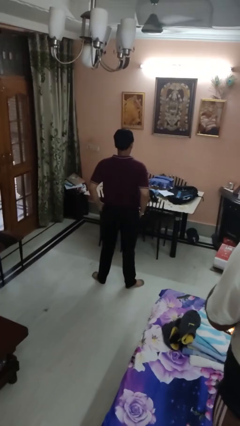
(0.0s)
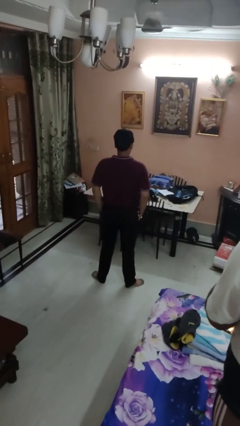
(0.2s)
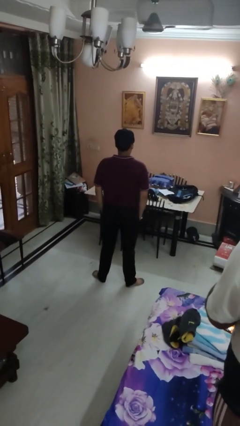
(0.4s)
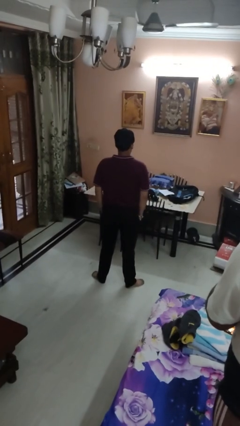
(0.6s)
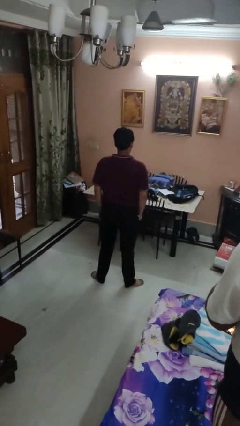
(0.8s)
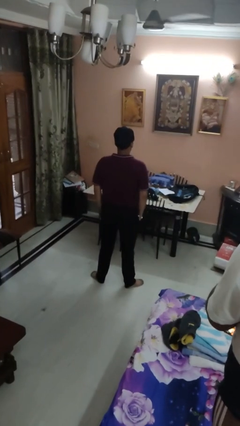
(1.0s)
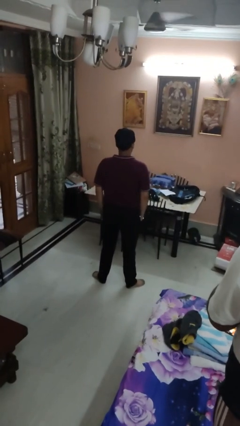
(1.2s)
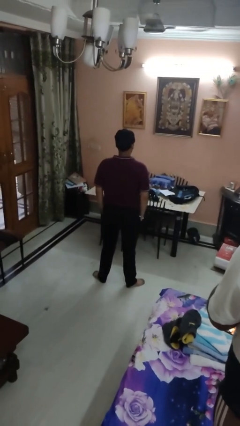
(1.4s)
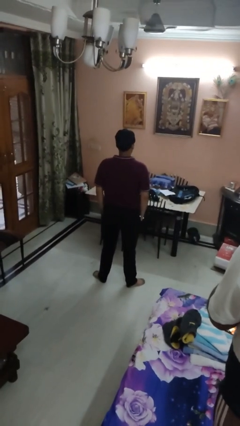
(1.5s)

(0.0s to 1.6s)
person puts hands in back pockets

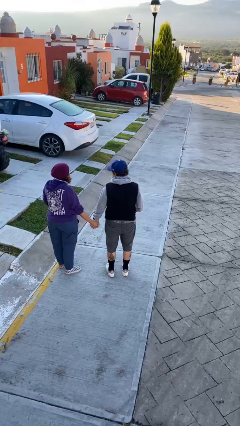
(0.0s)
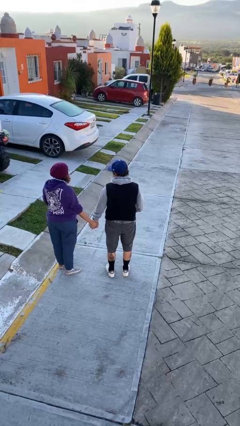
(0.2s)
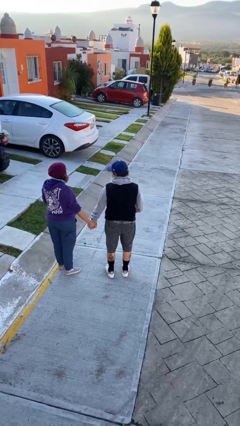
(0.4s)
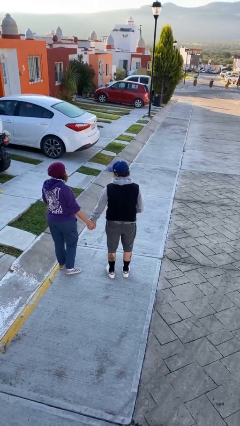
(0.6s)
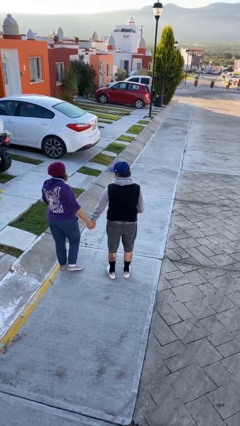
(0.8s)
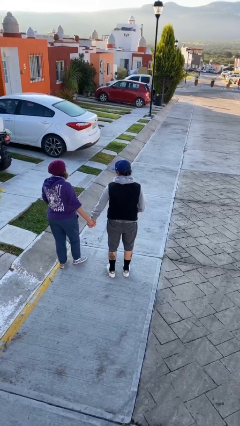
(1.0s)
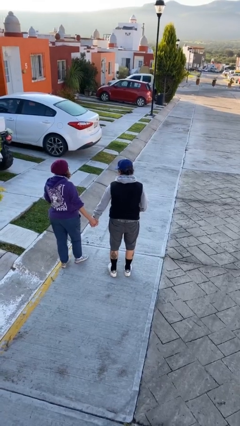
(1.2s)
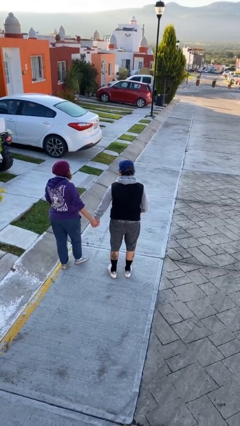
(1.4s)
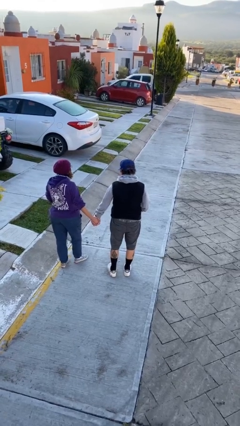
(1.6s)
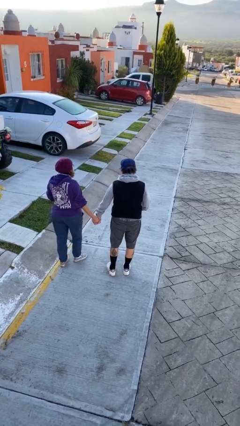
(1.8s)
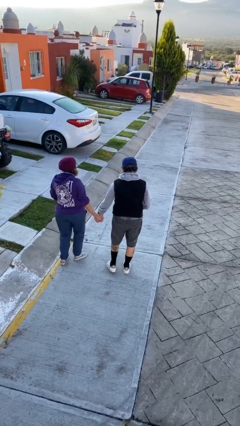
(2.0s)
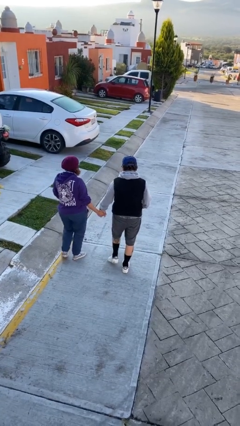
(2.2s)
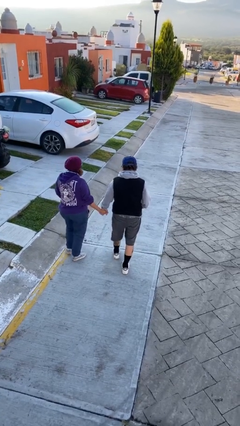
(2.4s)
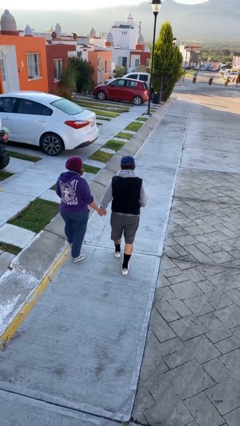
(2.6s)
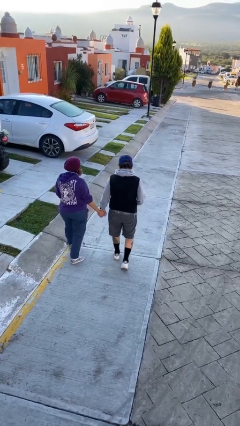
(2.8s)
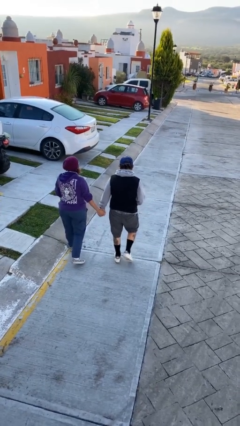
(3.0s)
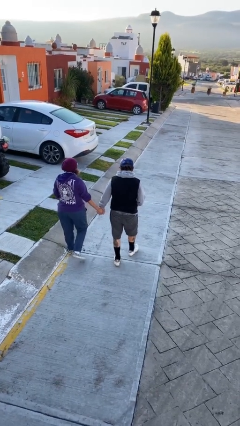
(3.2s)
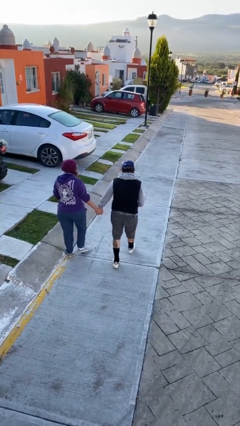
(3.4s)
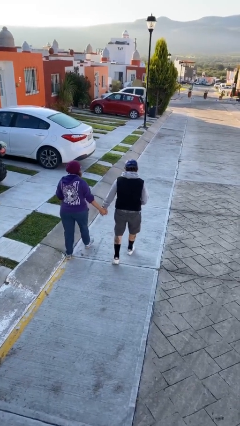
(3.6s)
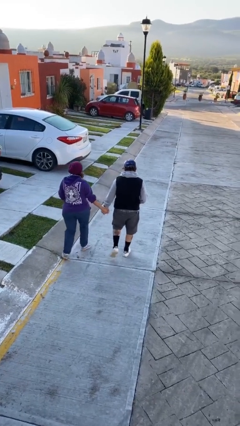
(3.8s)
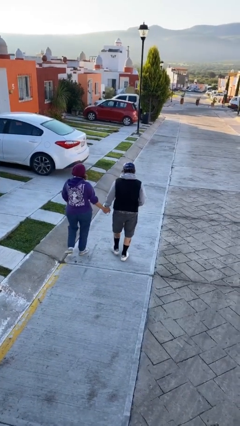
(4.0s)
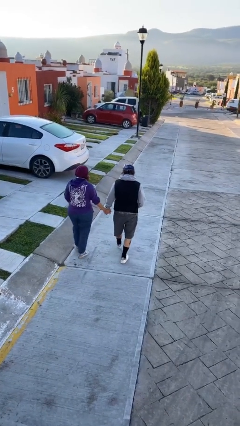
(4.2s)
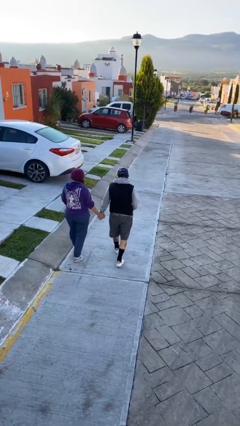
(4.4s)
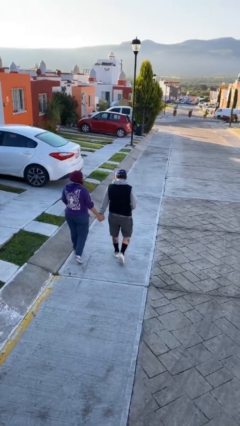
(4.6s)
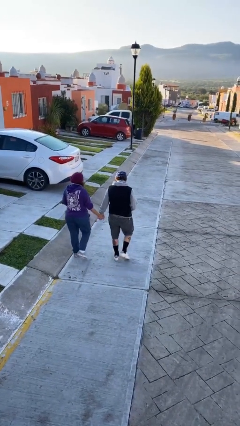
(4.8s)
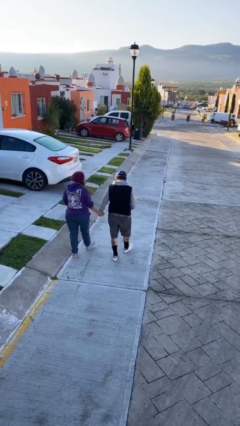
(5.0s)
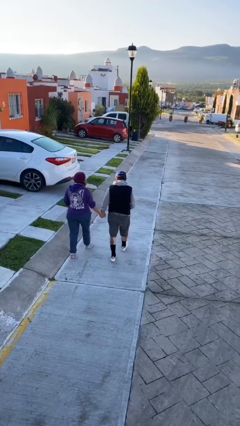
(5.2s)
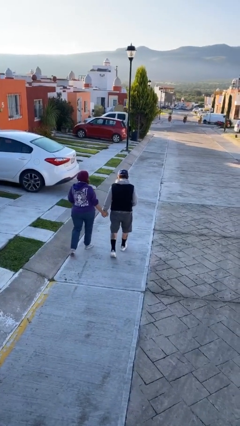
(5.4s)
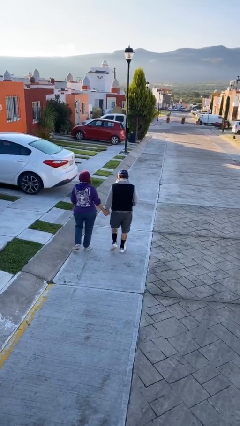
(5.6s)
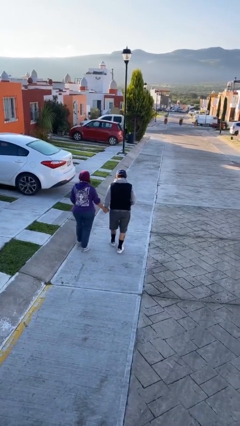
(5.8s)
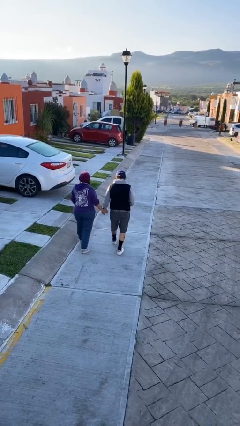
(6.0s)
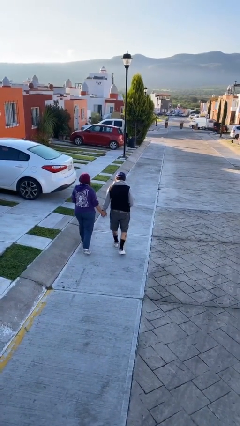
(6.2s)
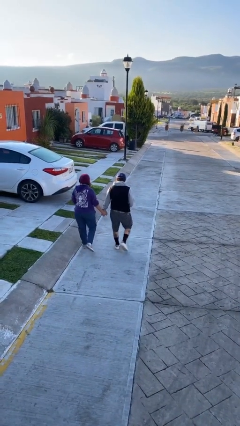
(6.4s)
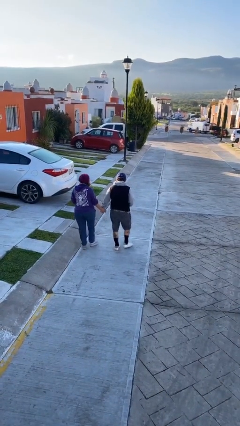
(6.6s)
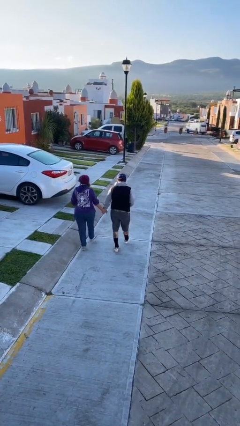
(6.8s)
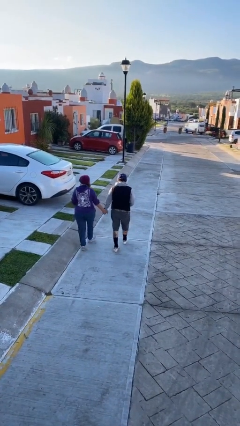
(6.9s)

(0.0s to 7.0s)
person holds hand

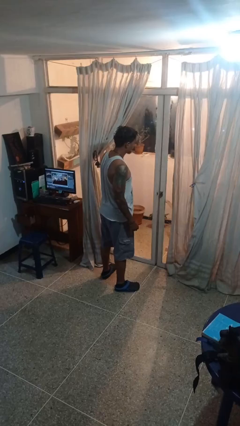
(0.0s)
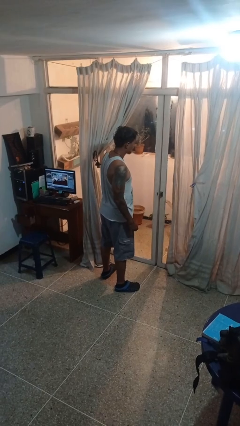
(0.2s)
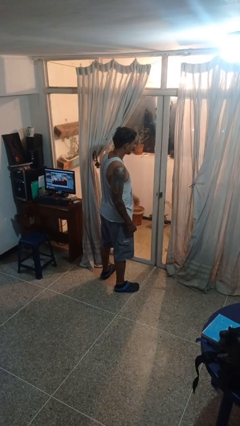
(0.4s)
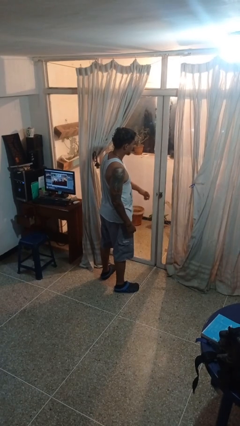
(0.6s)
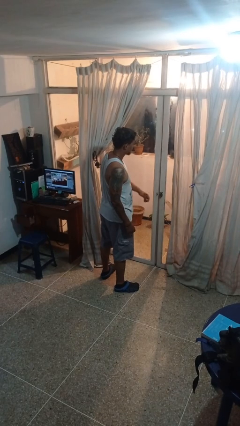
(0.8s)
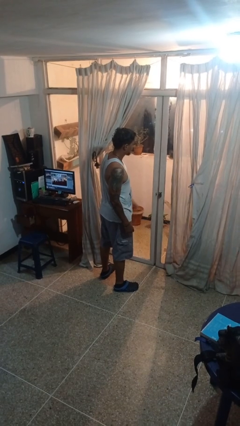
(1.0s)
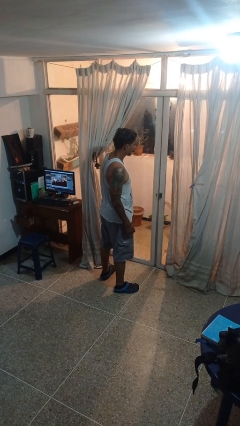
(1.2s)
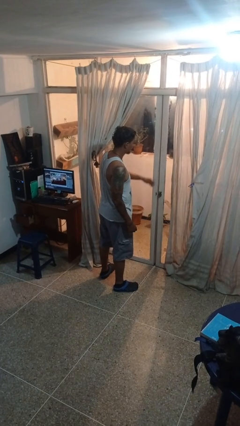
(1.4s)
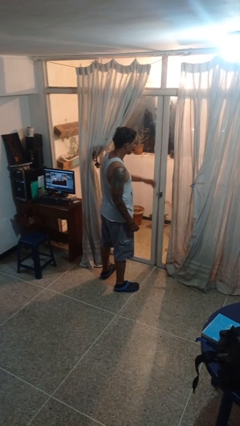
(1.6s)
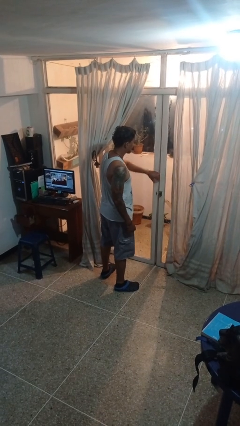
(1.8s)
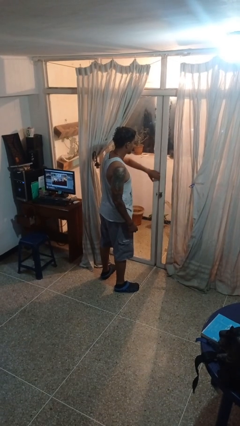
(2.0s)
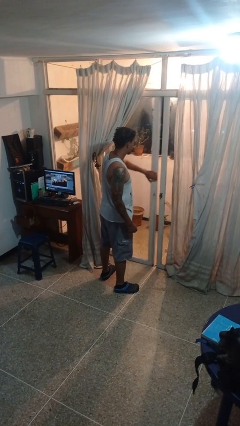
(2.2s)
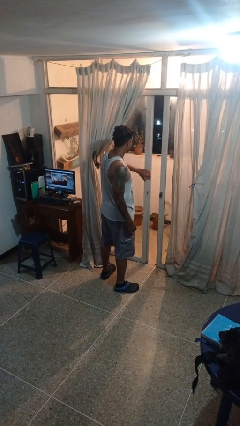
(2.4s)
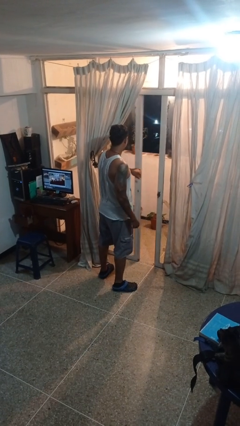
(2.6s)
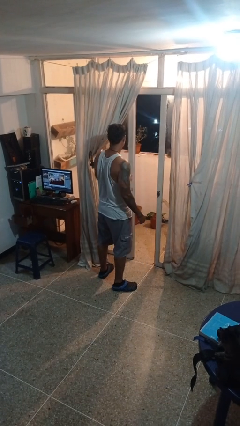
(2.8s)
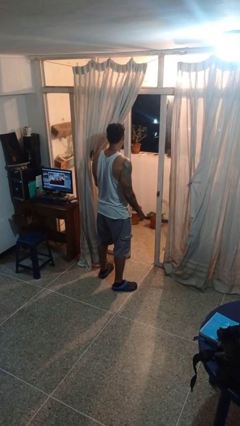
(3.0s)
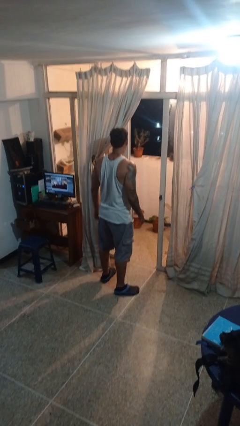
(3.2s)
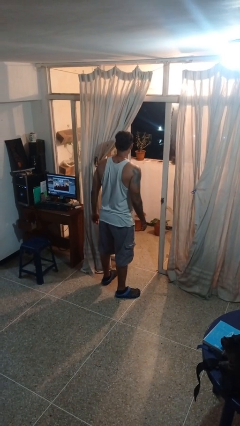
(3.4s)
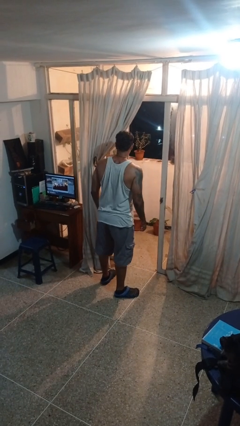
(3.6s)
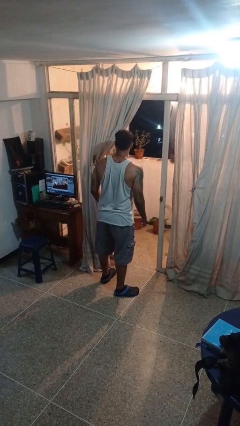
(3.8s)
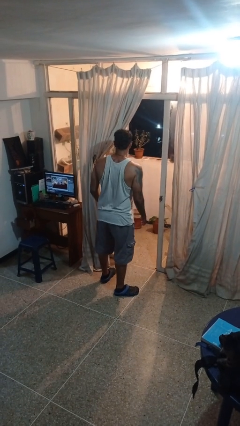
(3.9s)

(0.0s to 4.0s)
person opens sliding door

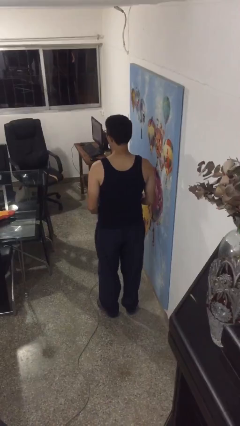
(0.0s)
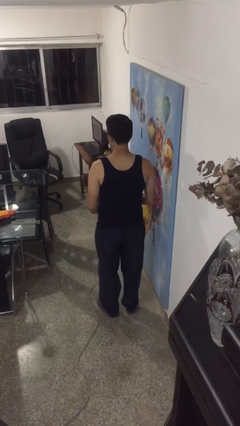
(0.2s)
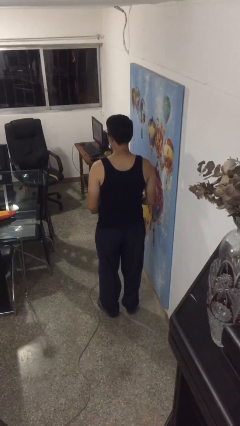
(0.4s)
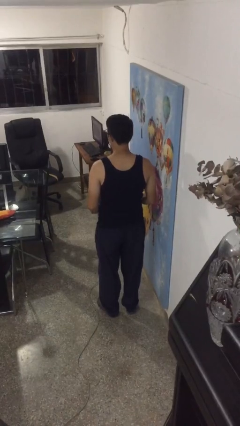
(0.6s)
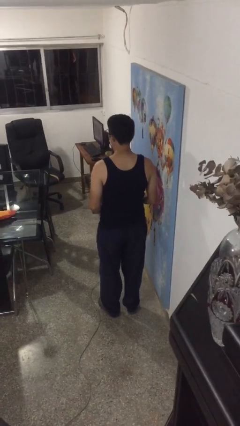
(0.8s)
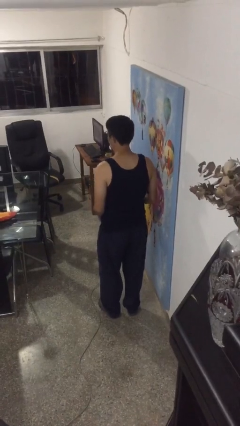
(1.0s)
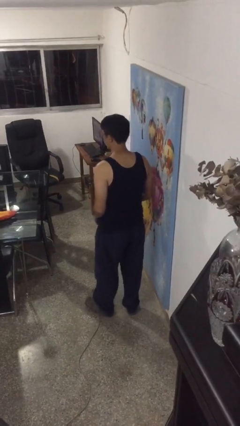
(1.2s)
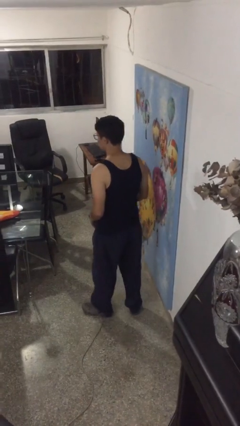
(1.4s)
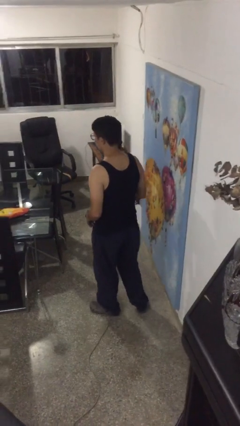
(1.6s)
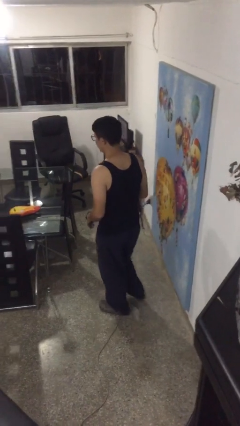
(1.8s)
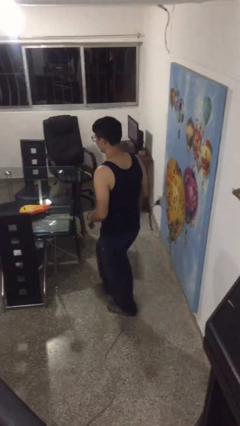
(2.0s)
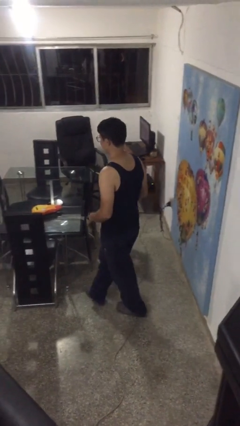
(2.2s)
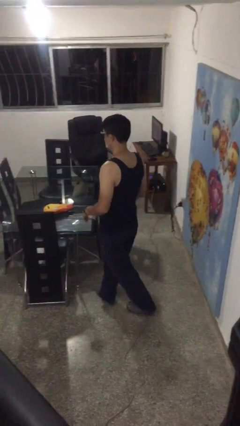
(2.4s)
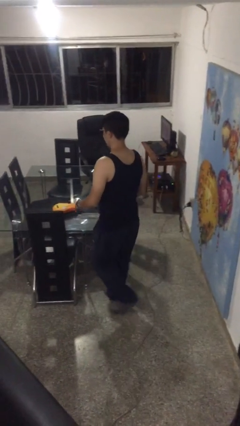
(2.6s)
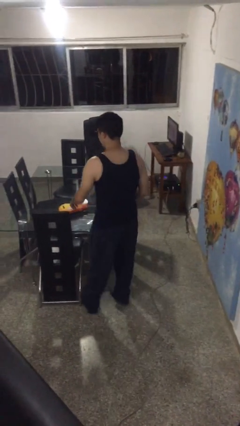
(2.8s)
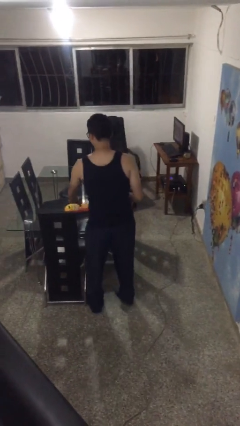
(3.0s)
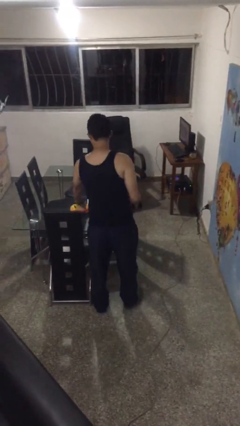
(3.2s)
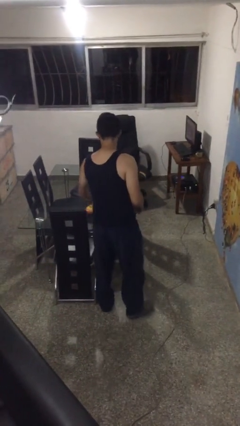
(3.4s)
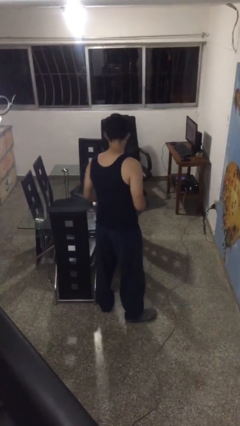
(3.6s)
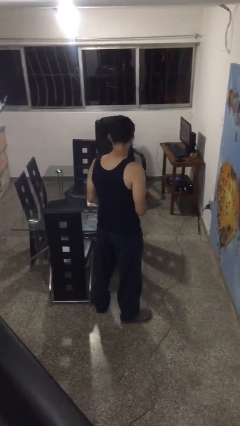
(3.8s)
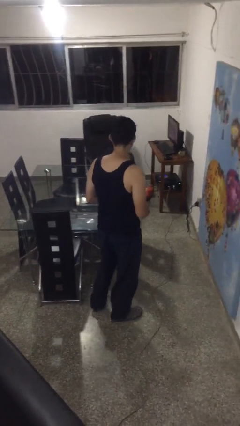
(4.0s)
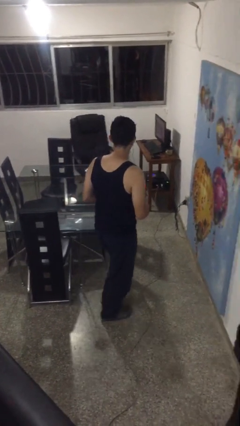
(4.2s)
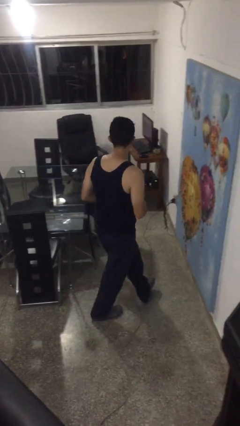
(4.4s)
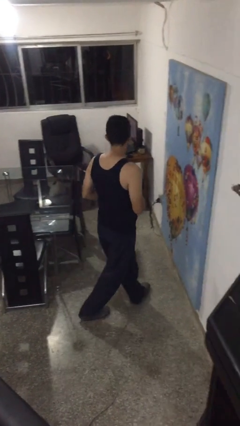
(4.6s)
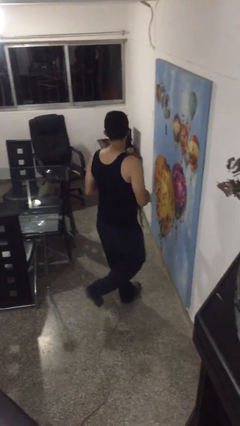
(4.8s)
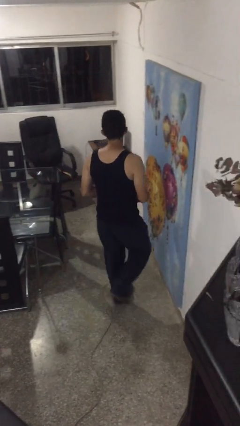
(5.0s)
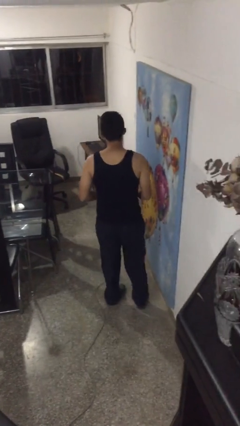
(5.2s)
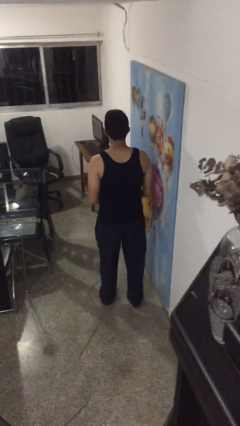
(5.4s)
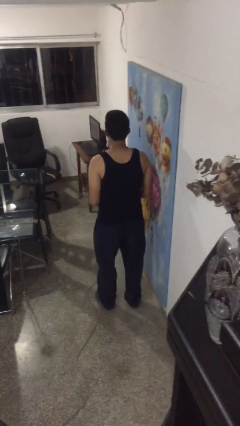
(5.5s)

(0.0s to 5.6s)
person picks up object from table
